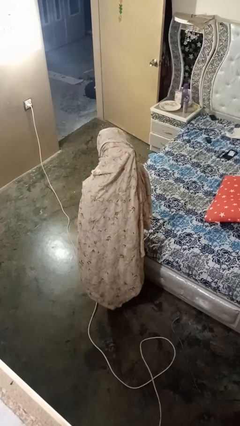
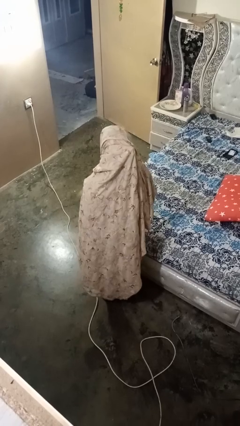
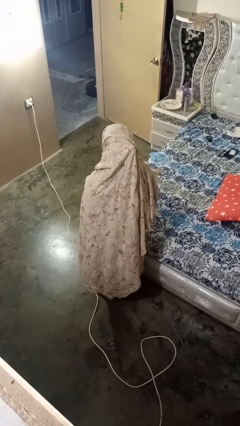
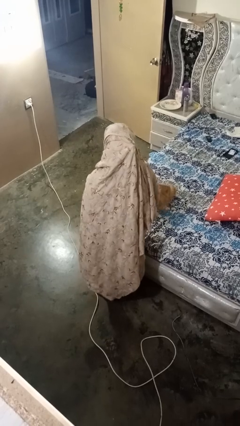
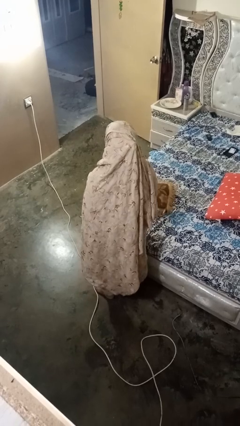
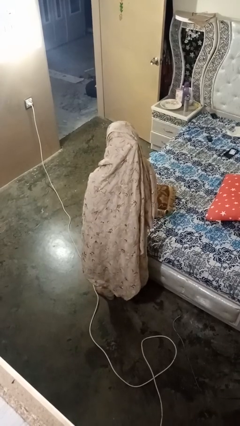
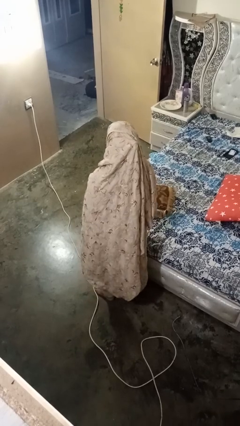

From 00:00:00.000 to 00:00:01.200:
person puts down object on bed

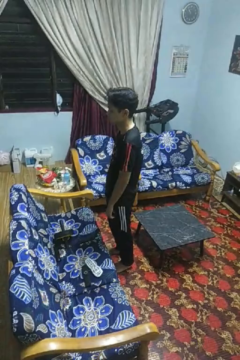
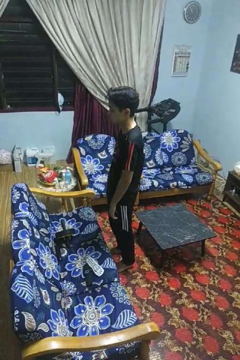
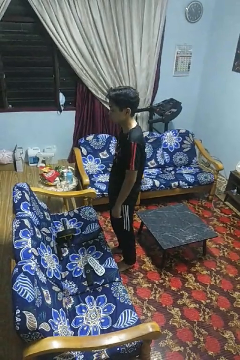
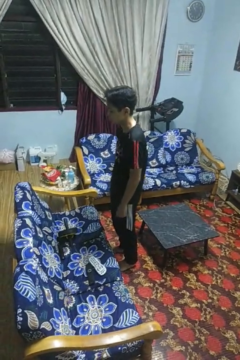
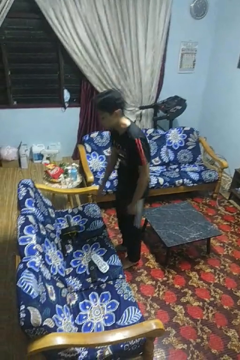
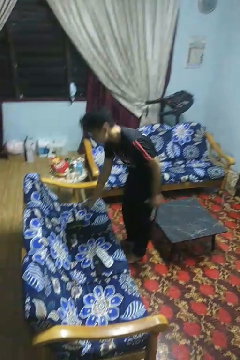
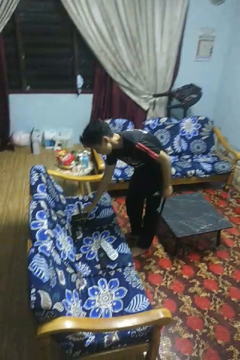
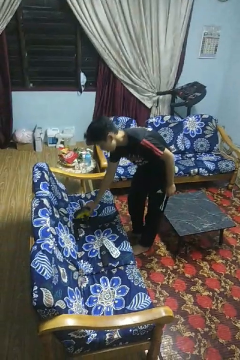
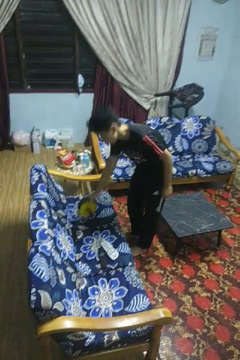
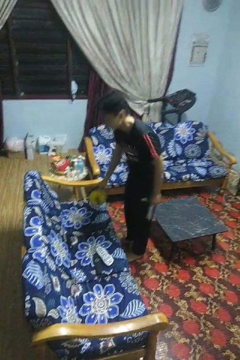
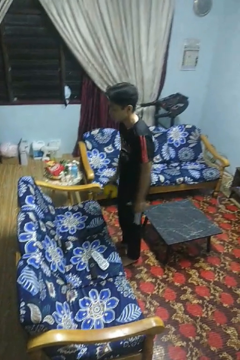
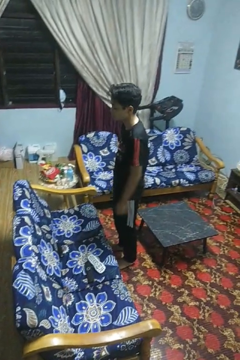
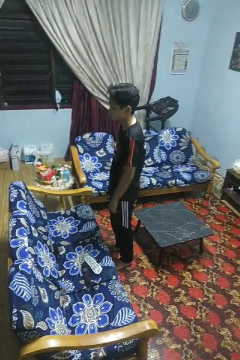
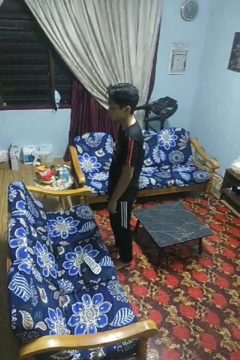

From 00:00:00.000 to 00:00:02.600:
person picks up object from couch

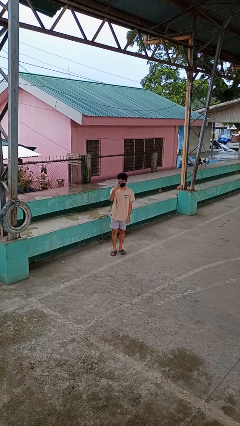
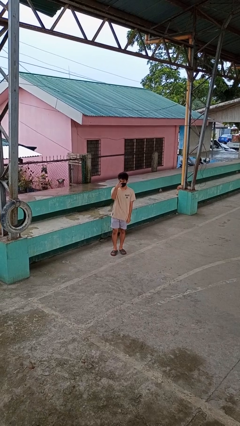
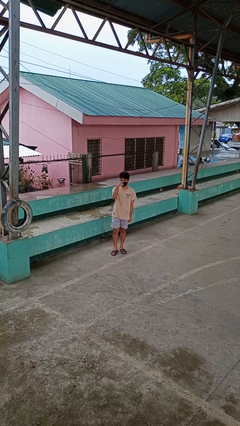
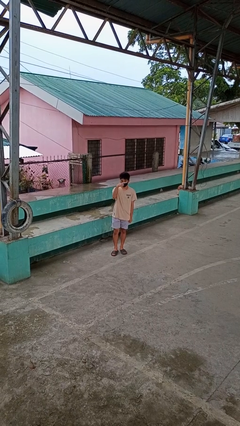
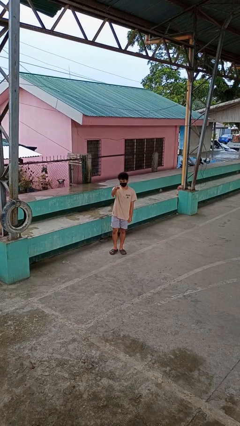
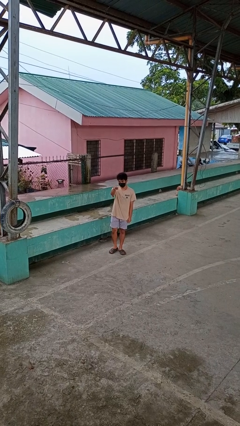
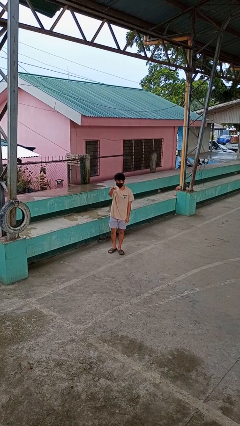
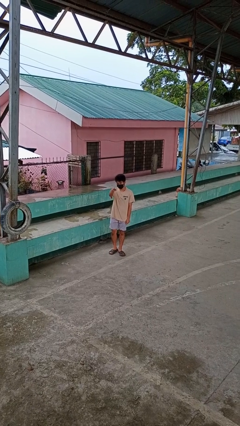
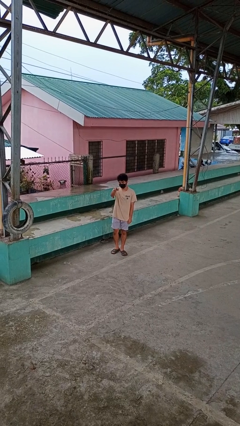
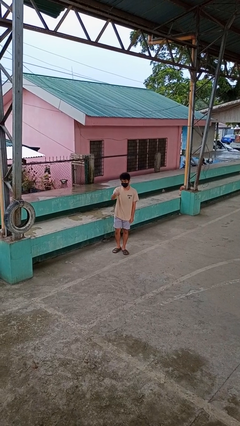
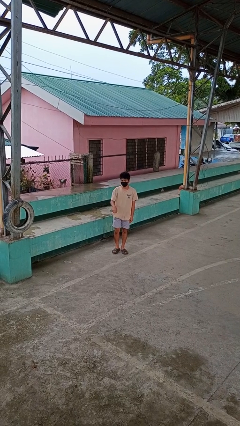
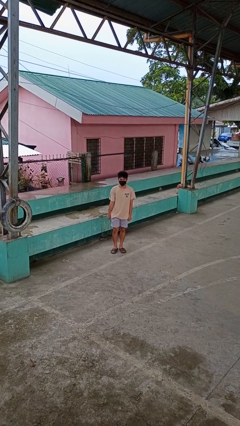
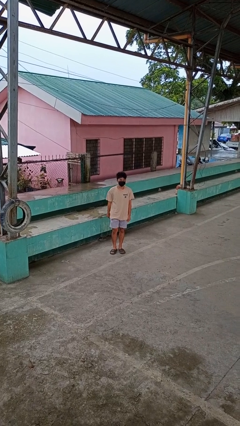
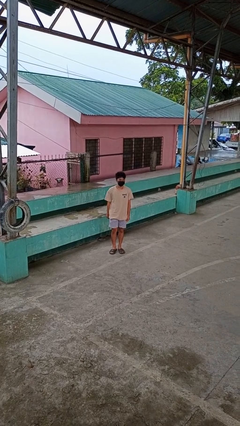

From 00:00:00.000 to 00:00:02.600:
person gestures watch closely

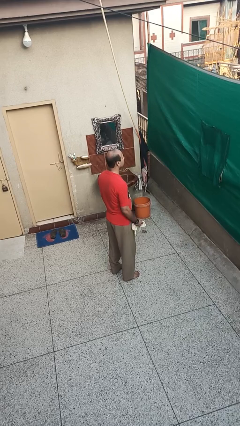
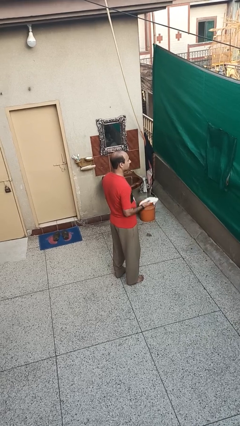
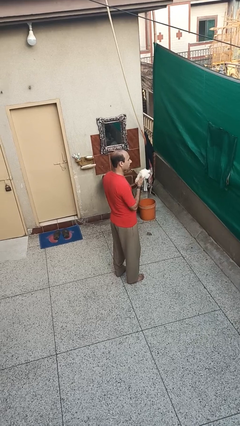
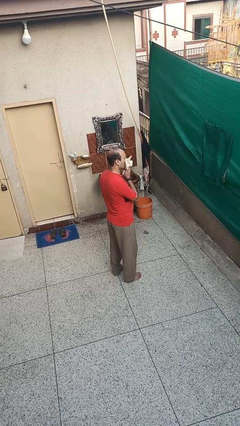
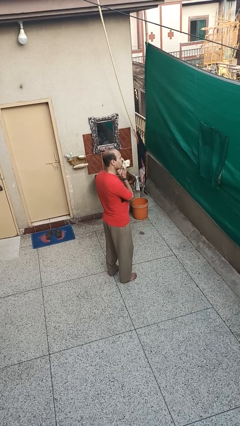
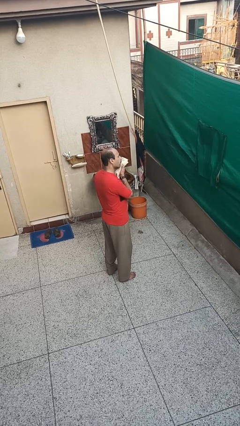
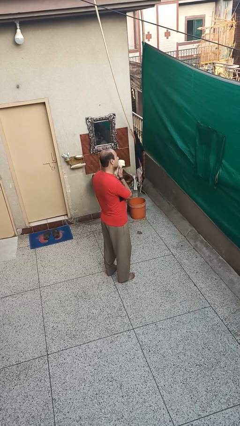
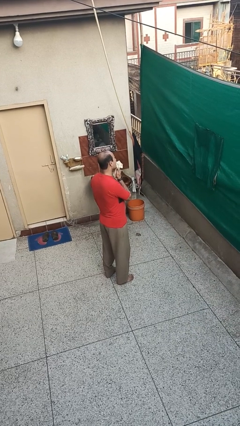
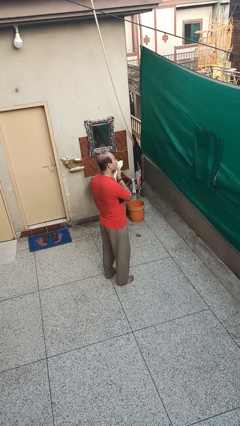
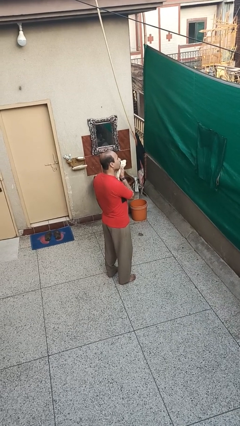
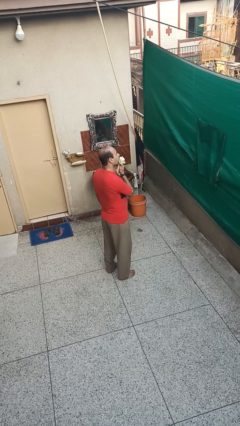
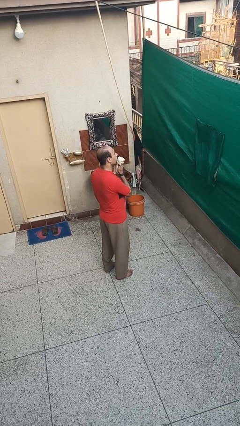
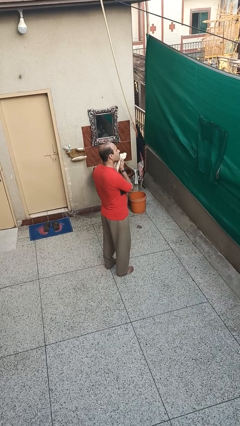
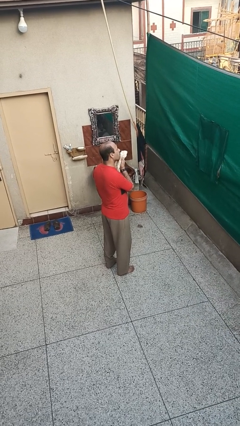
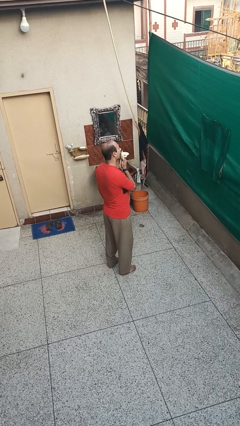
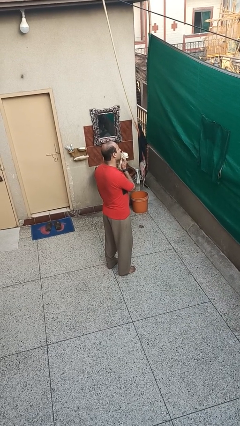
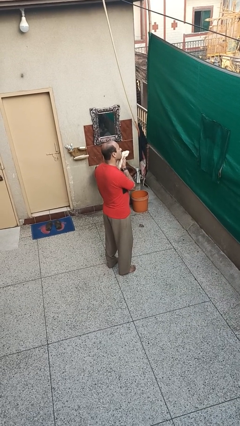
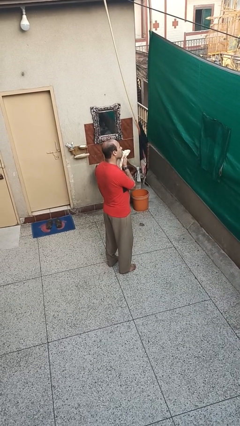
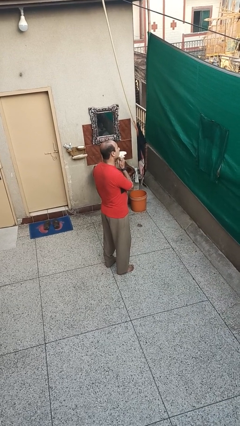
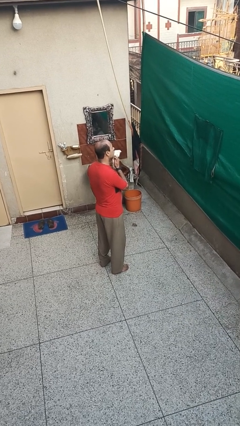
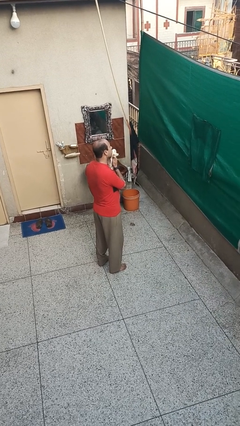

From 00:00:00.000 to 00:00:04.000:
person wipes mouth with napkin

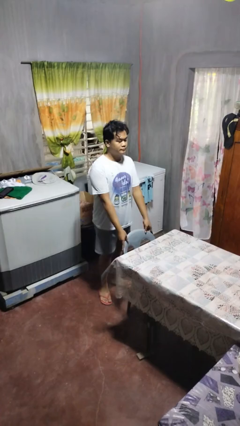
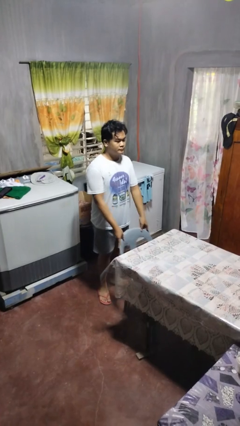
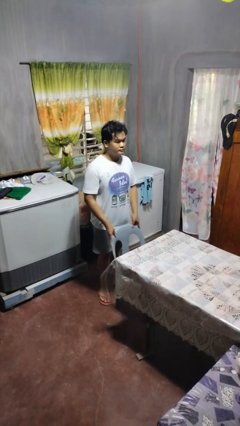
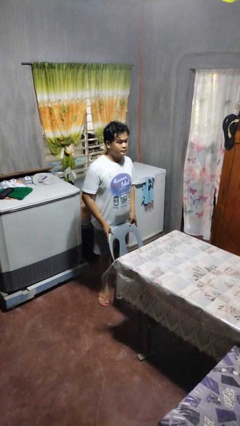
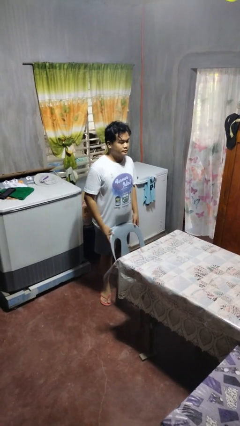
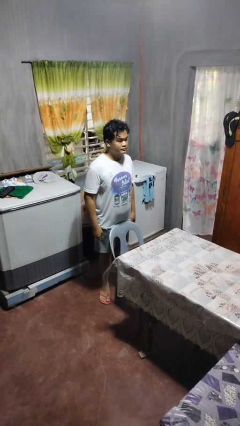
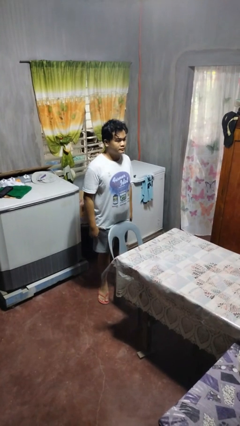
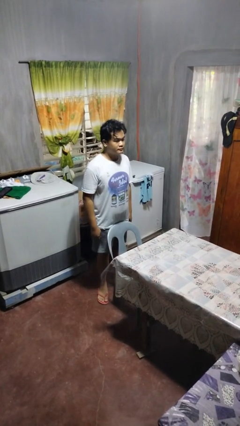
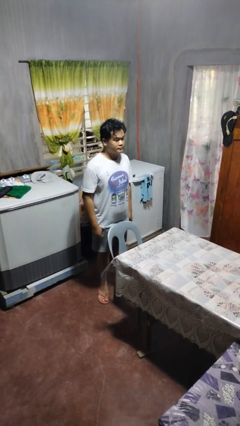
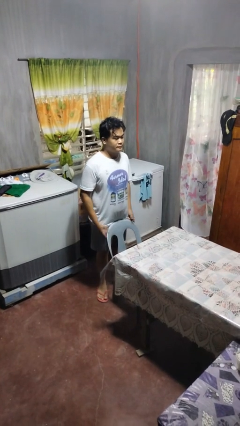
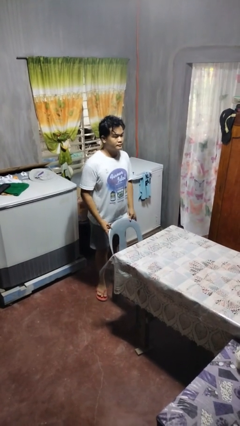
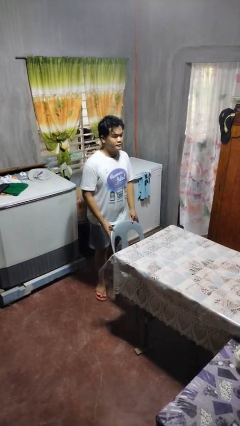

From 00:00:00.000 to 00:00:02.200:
person pulls out chair

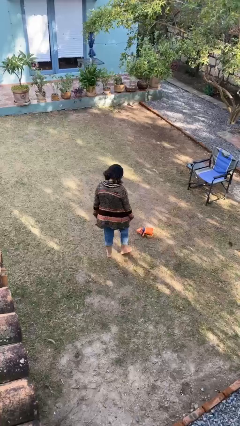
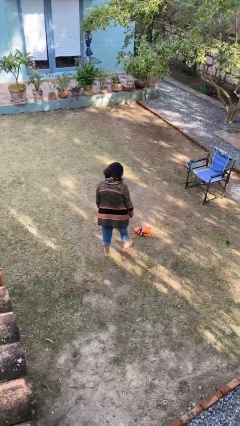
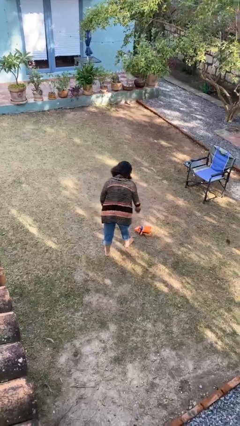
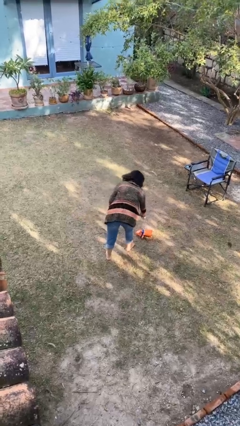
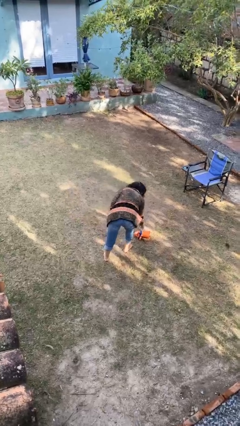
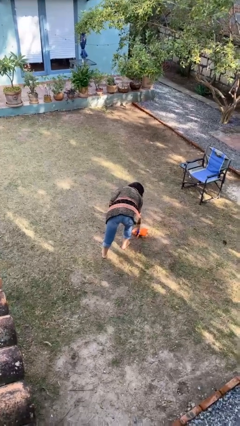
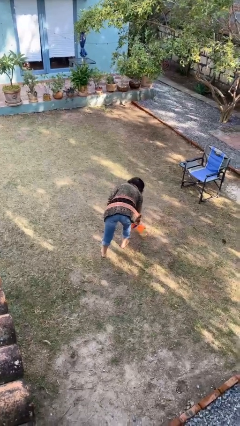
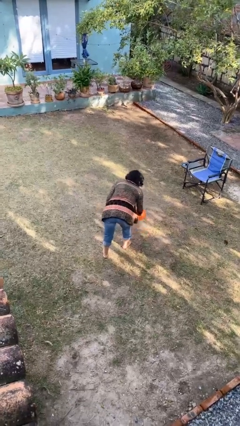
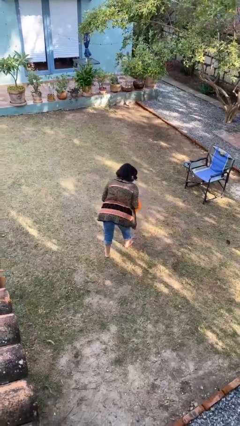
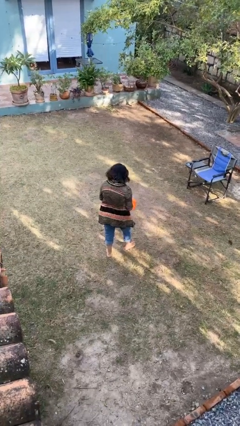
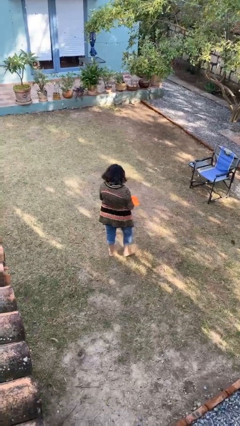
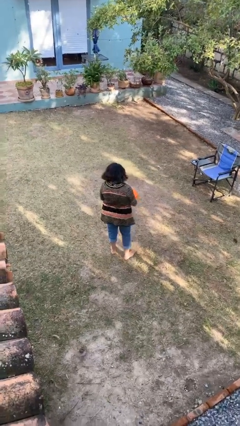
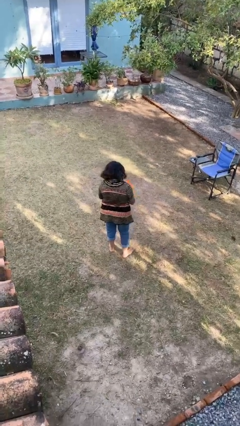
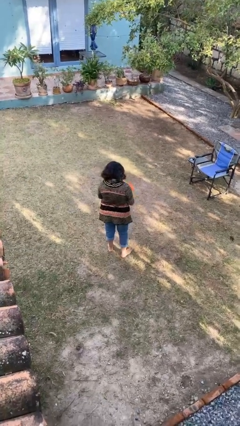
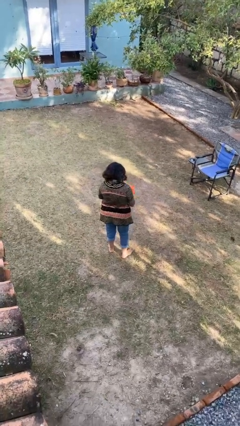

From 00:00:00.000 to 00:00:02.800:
person picks up object from floor

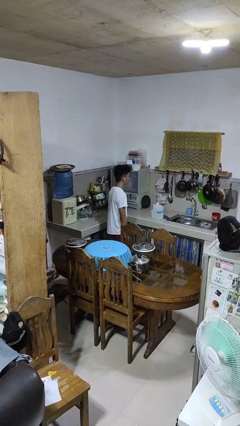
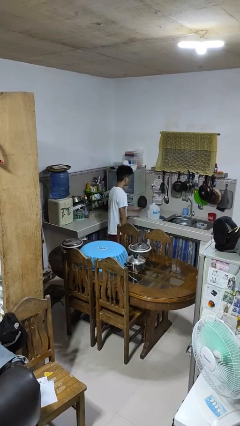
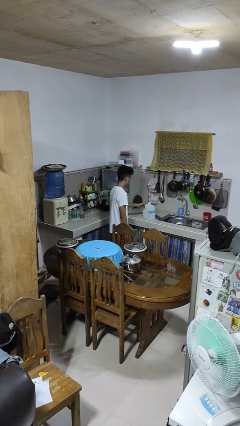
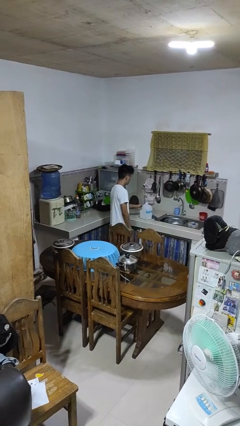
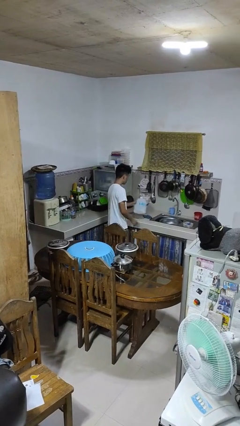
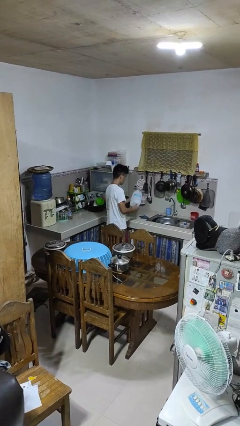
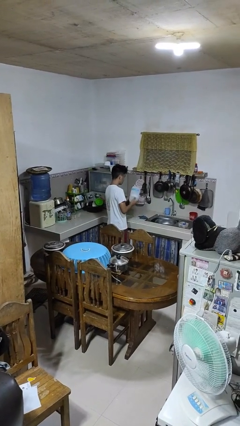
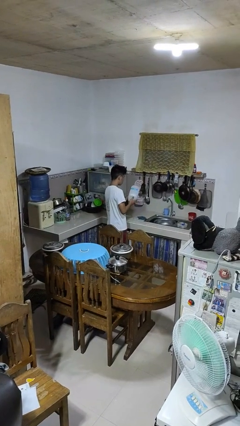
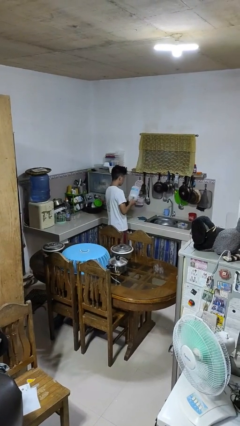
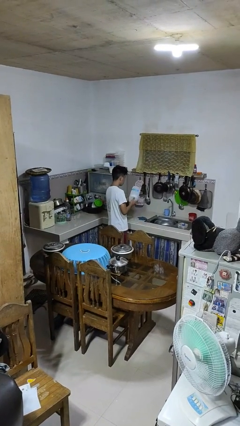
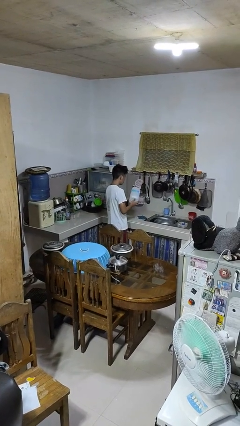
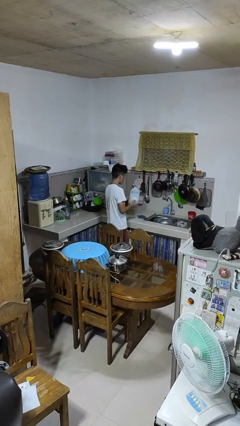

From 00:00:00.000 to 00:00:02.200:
person picks up object from countertop
